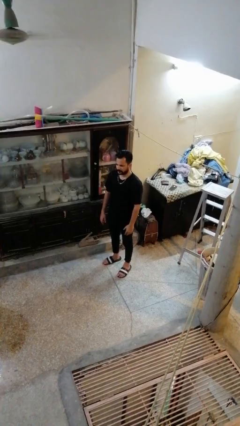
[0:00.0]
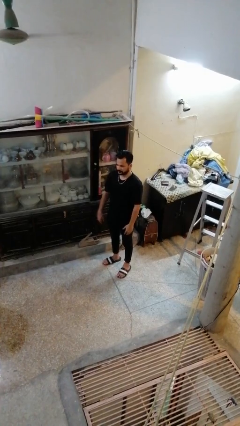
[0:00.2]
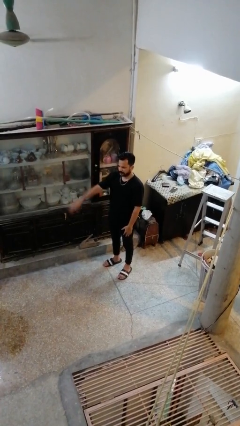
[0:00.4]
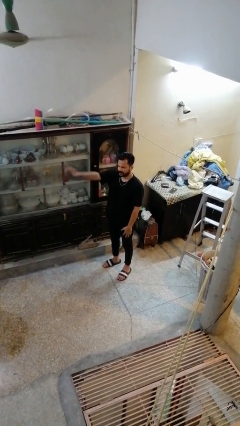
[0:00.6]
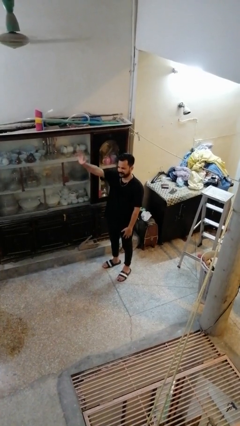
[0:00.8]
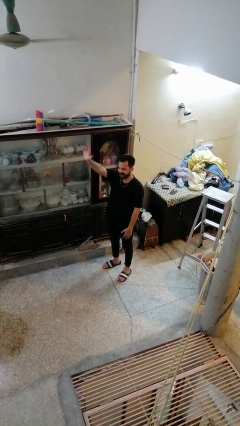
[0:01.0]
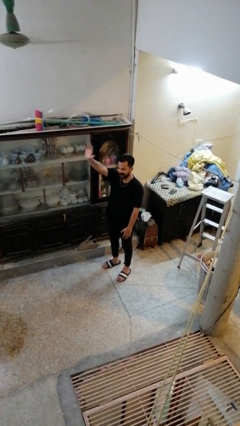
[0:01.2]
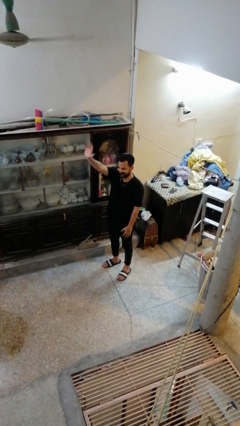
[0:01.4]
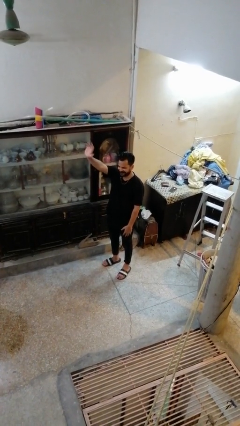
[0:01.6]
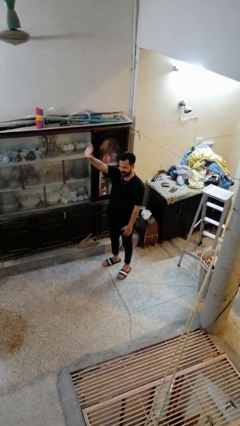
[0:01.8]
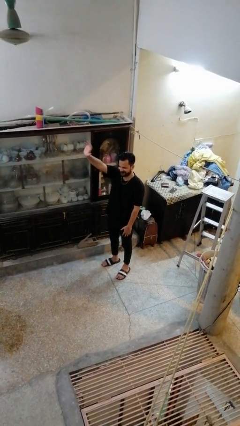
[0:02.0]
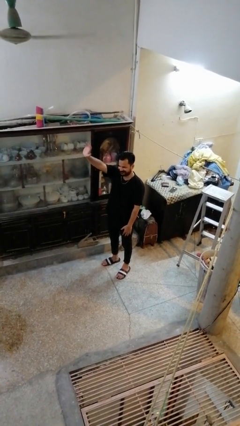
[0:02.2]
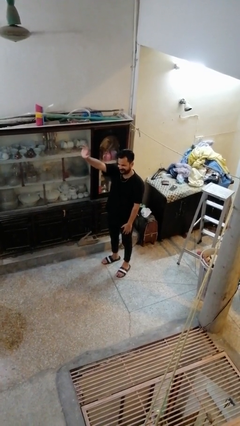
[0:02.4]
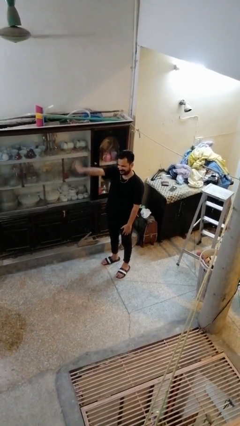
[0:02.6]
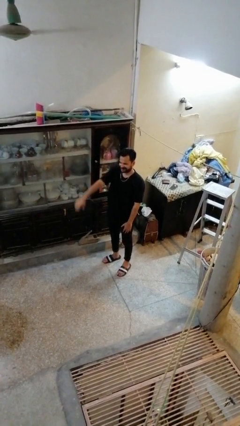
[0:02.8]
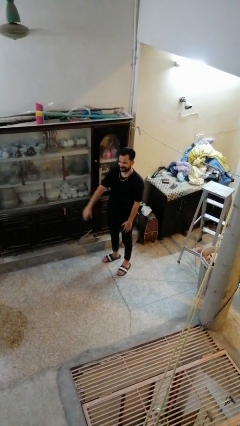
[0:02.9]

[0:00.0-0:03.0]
person waves at person

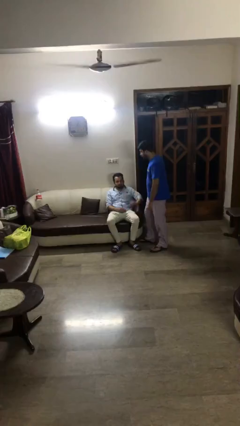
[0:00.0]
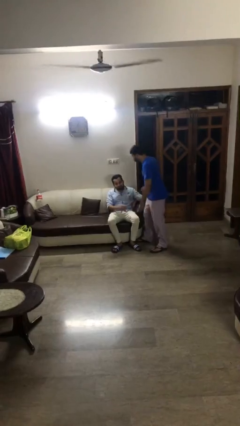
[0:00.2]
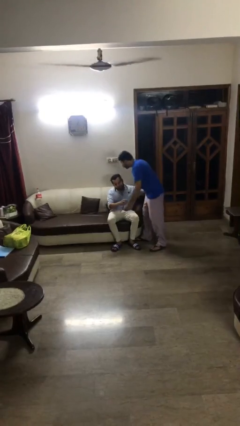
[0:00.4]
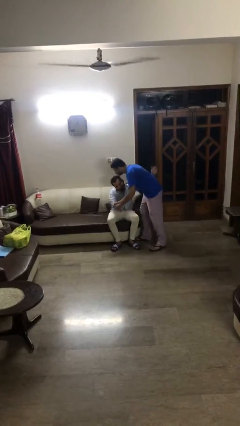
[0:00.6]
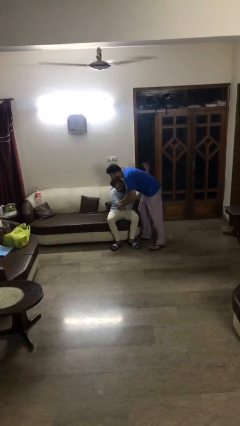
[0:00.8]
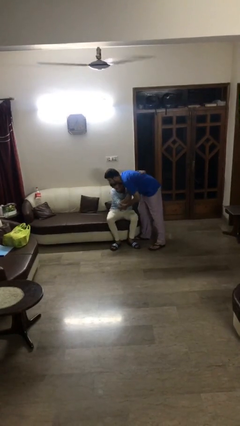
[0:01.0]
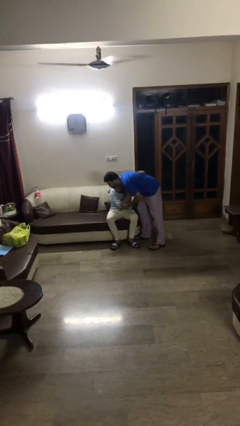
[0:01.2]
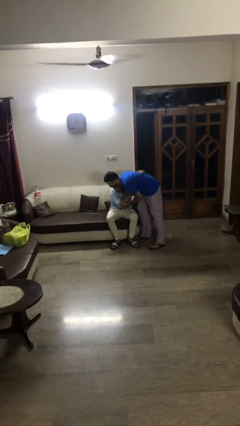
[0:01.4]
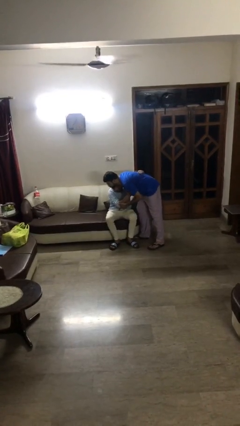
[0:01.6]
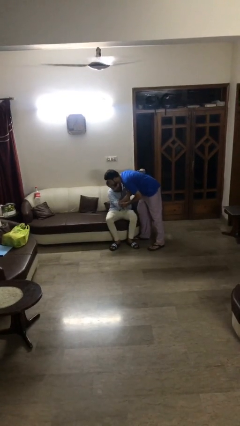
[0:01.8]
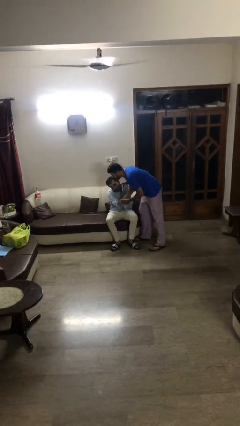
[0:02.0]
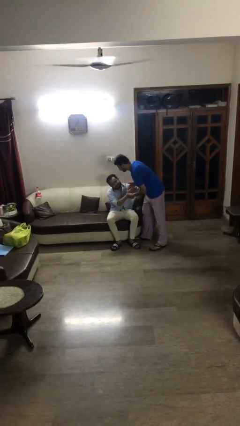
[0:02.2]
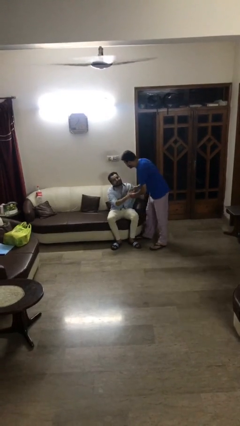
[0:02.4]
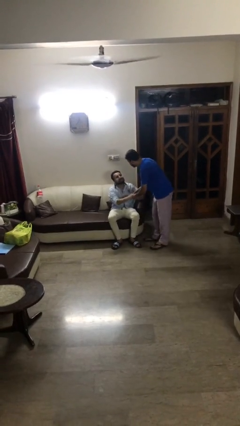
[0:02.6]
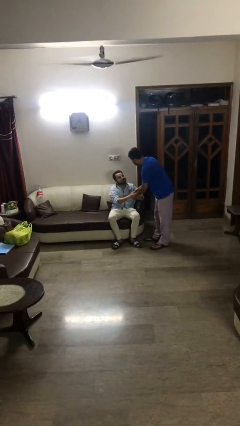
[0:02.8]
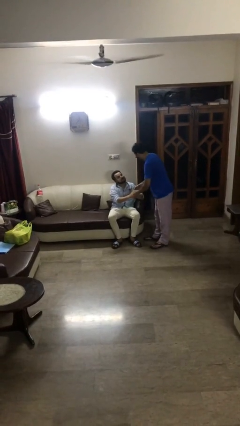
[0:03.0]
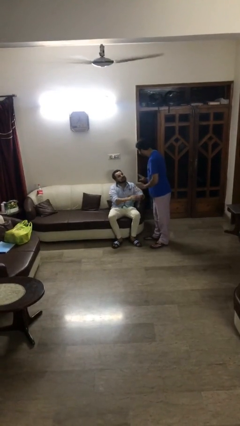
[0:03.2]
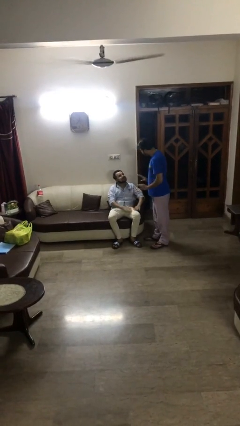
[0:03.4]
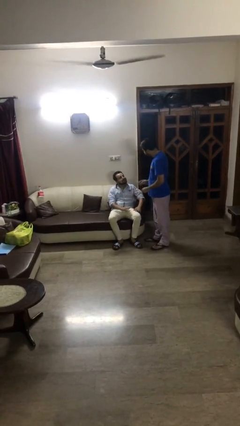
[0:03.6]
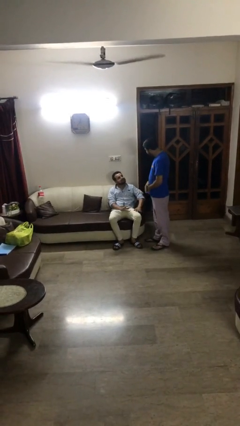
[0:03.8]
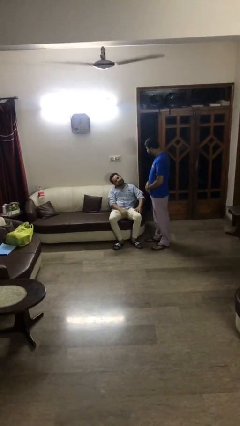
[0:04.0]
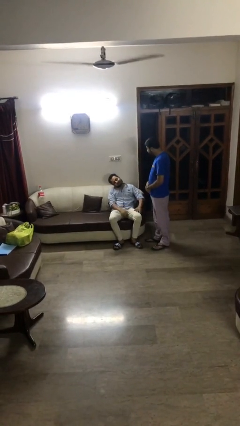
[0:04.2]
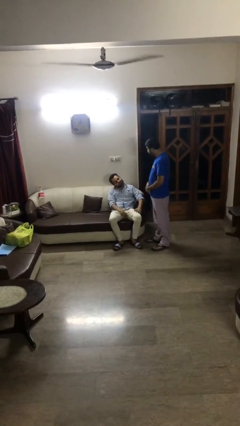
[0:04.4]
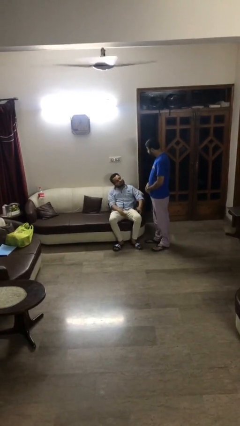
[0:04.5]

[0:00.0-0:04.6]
person embraces person

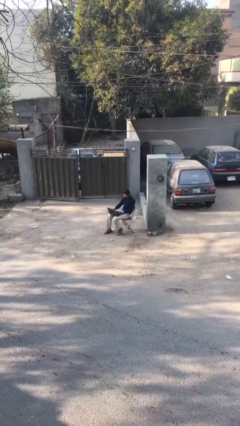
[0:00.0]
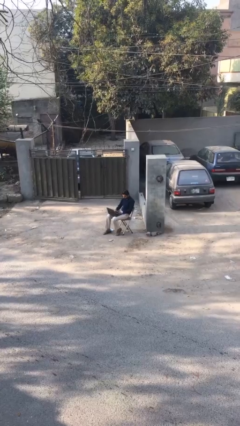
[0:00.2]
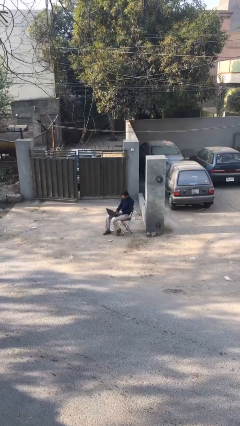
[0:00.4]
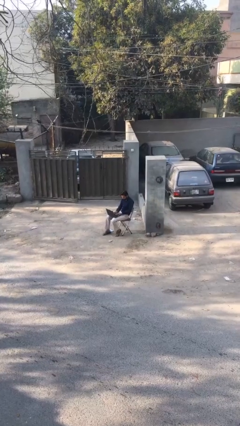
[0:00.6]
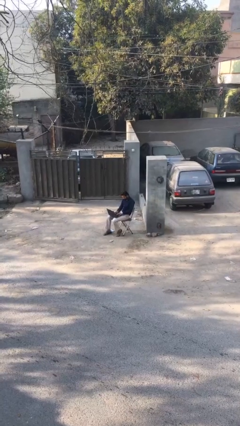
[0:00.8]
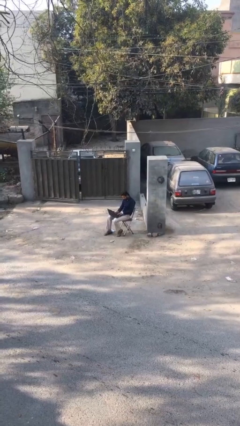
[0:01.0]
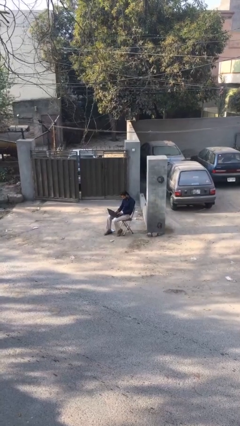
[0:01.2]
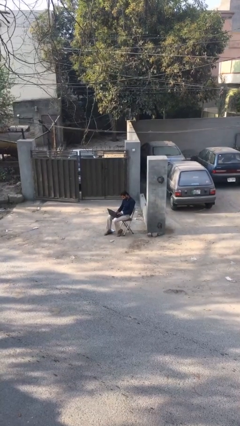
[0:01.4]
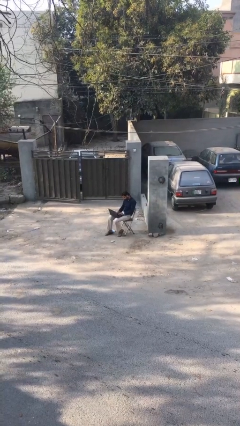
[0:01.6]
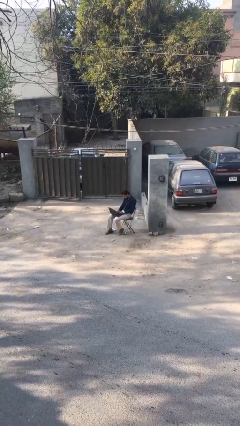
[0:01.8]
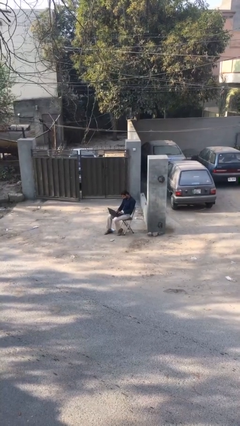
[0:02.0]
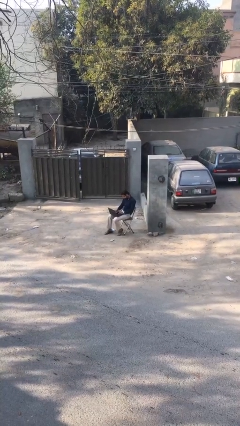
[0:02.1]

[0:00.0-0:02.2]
person interacts with laptop

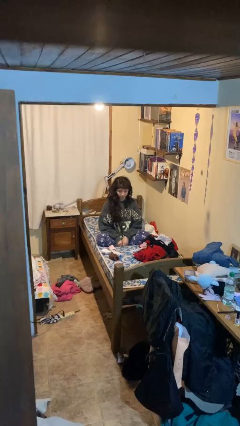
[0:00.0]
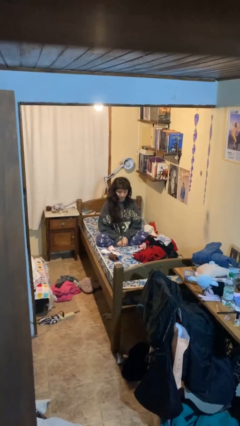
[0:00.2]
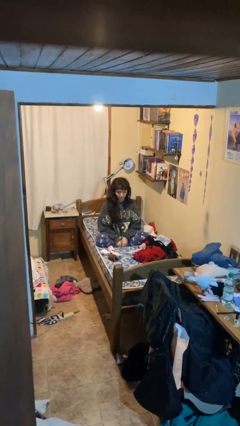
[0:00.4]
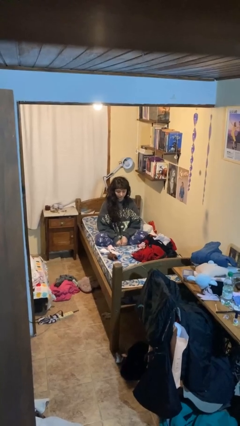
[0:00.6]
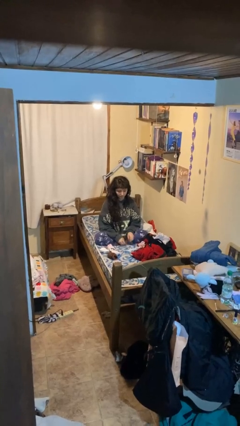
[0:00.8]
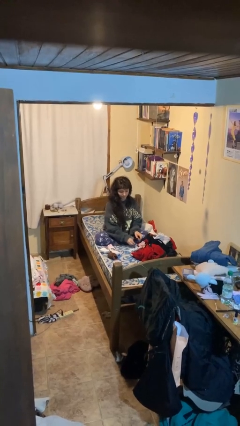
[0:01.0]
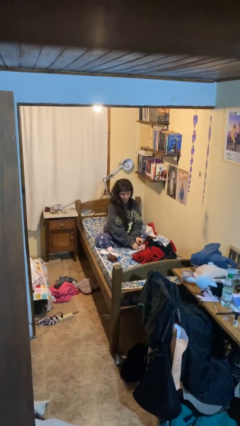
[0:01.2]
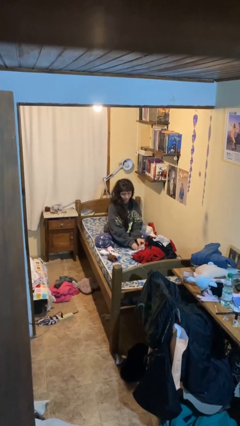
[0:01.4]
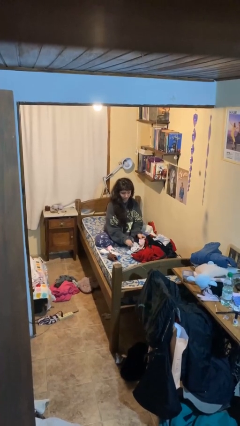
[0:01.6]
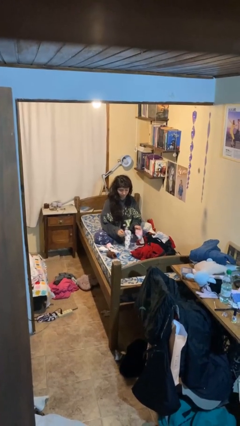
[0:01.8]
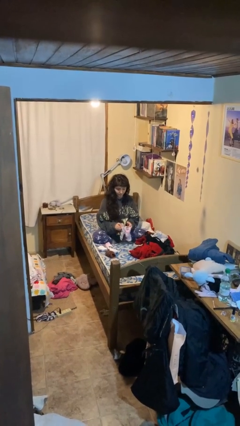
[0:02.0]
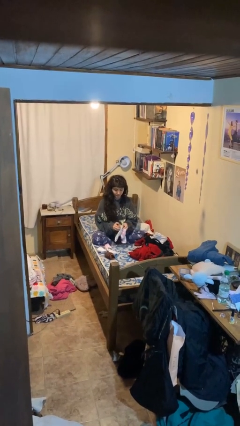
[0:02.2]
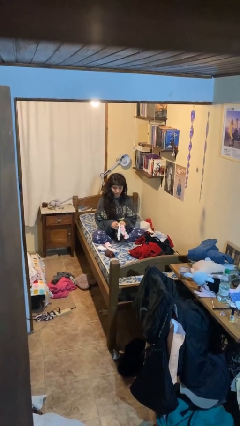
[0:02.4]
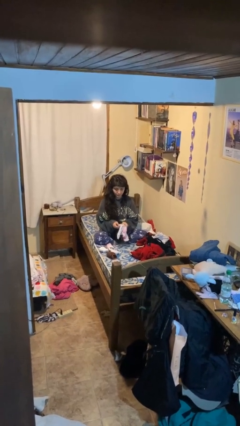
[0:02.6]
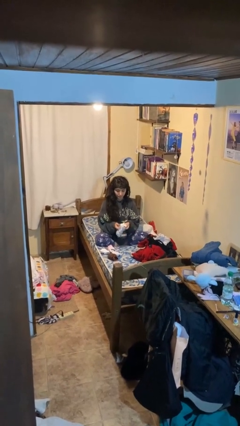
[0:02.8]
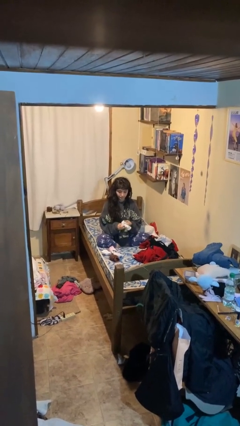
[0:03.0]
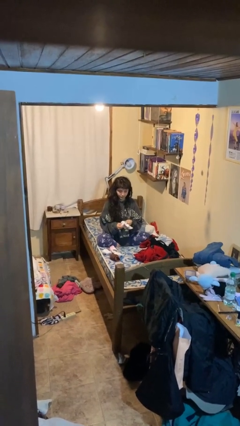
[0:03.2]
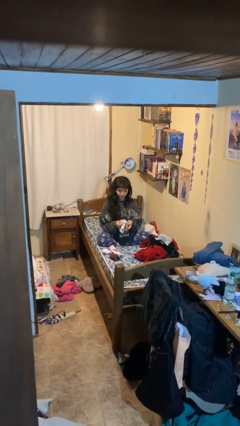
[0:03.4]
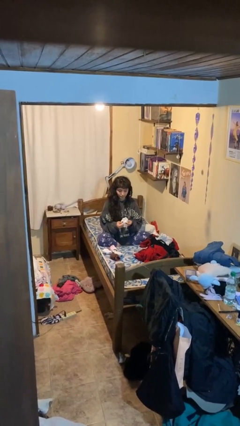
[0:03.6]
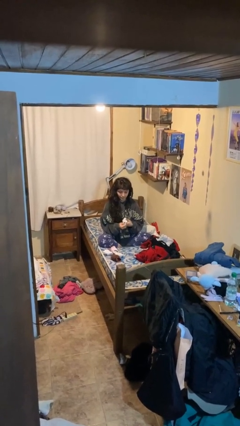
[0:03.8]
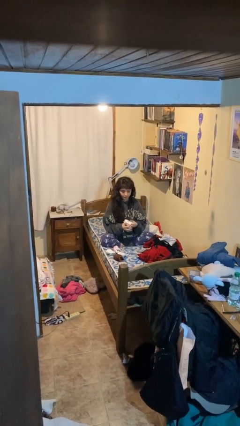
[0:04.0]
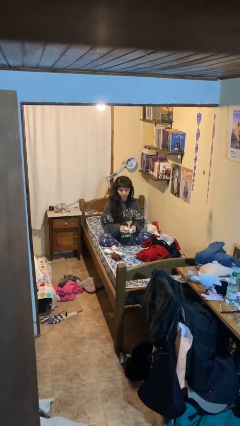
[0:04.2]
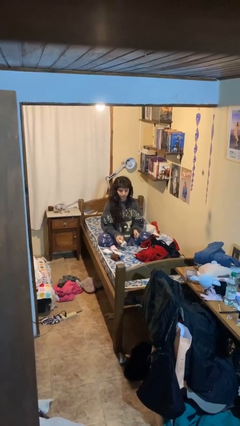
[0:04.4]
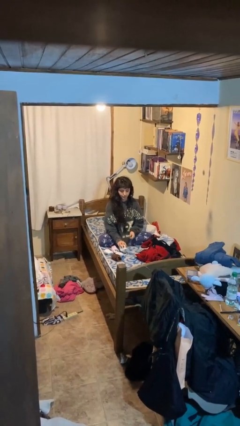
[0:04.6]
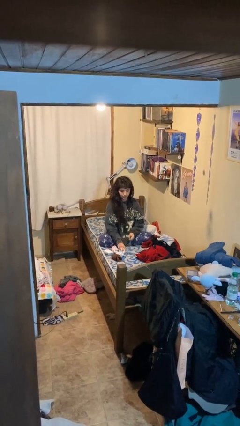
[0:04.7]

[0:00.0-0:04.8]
person folds socks

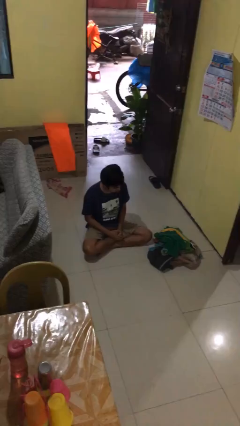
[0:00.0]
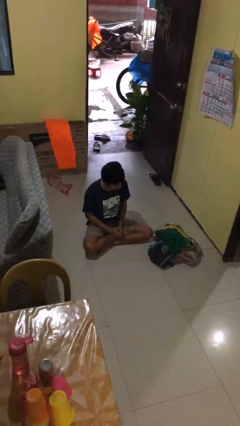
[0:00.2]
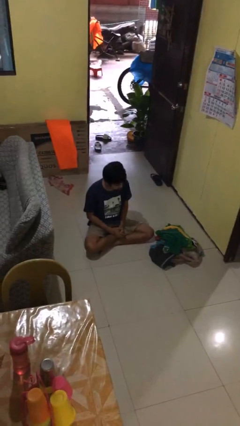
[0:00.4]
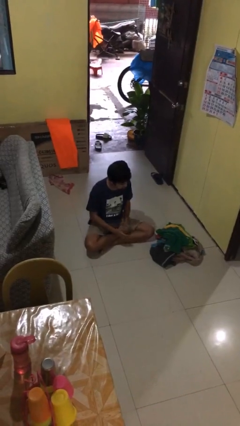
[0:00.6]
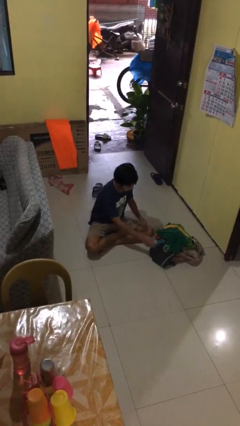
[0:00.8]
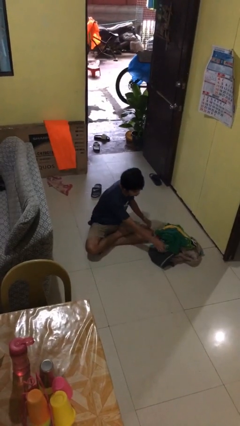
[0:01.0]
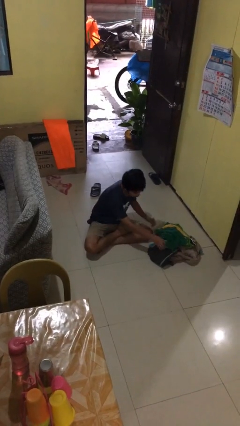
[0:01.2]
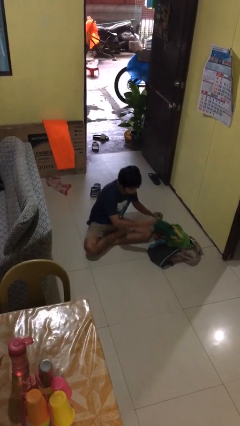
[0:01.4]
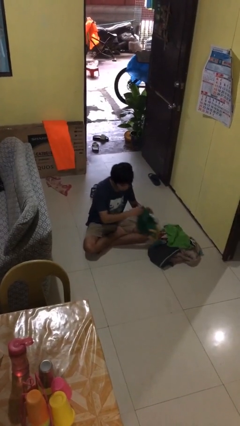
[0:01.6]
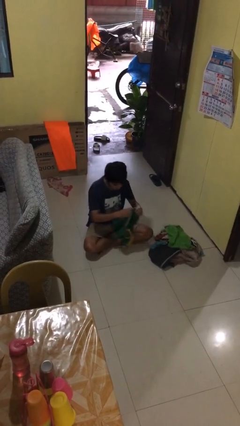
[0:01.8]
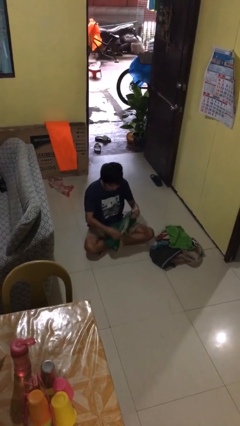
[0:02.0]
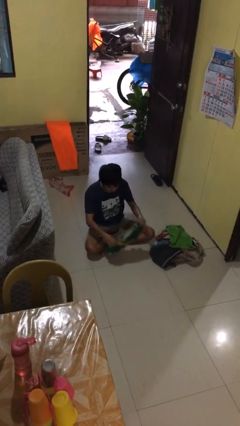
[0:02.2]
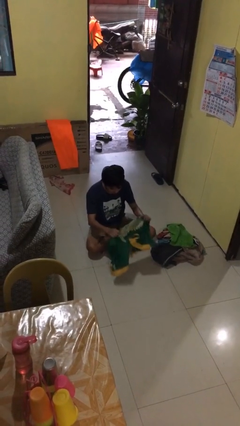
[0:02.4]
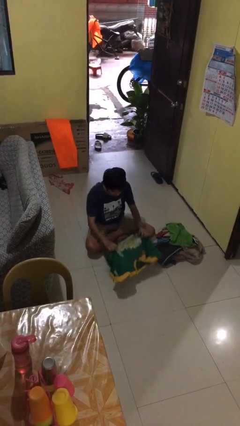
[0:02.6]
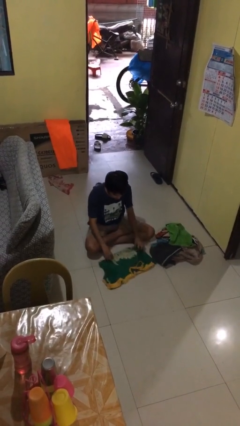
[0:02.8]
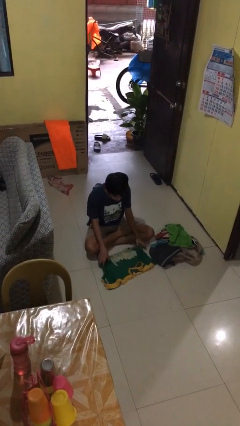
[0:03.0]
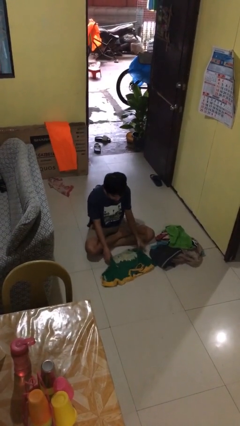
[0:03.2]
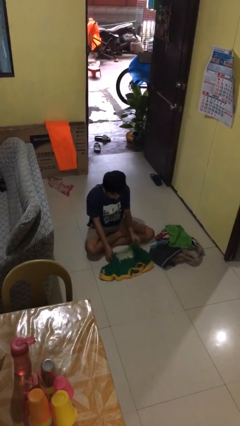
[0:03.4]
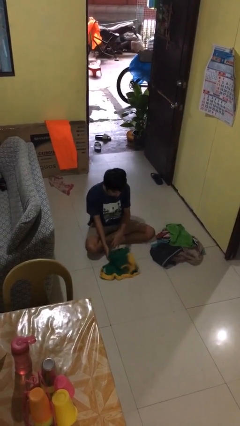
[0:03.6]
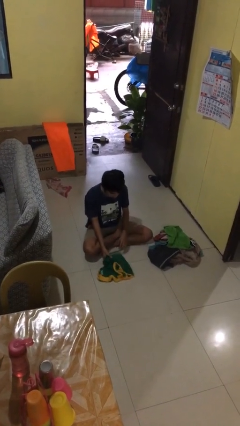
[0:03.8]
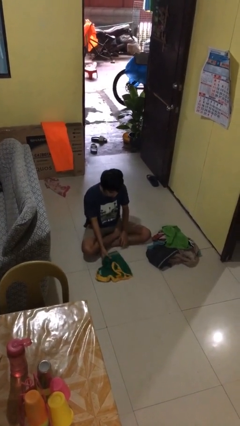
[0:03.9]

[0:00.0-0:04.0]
person folds shirt
